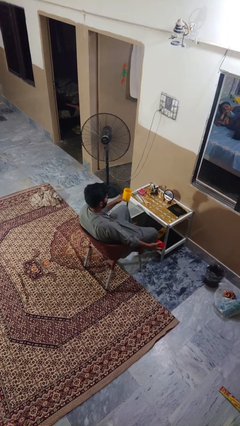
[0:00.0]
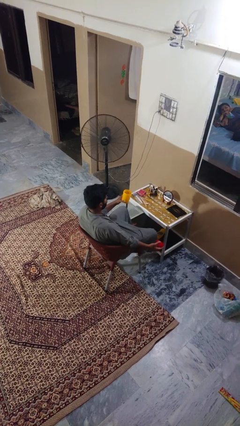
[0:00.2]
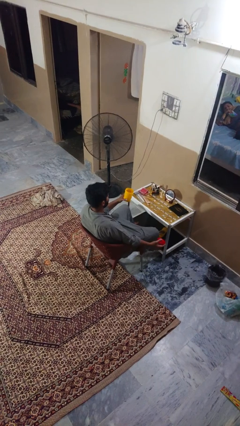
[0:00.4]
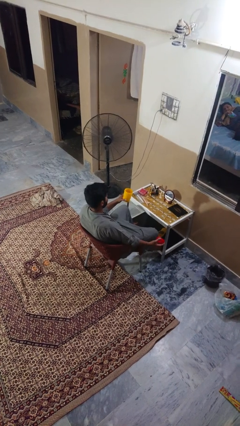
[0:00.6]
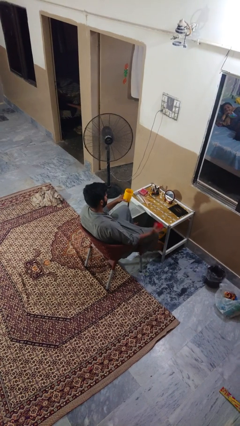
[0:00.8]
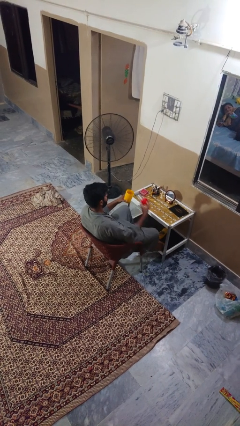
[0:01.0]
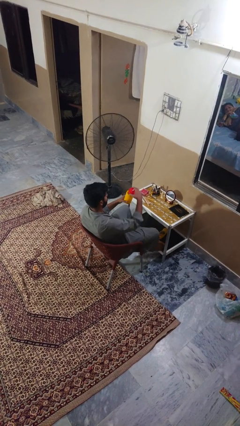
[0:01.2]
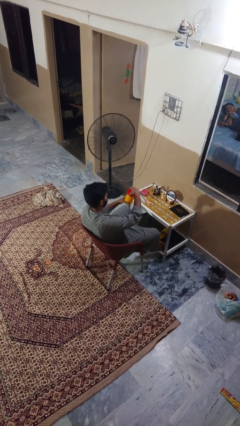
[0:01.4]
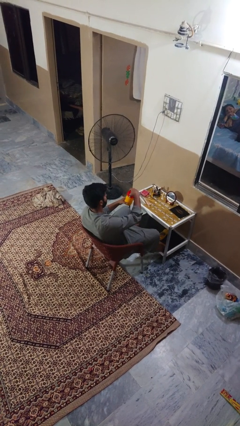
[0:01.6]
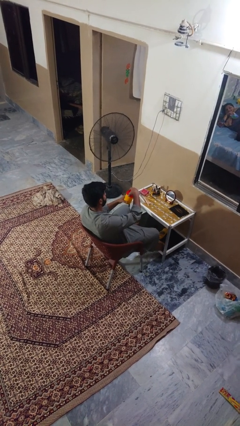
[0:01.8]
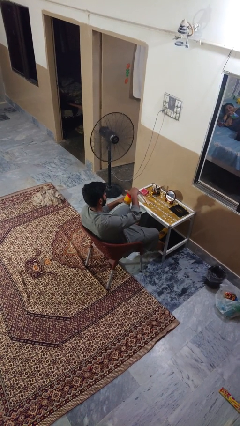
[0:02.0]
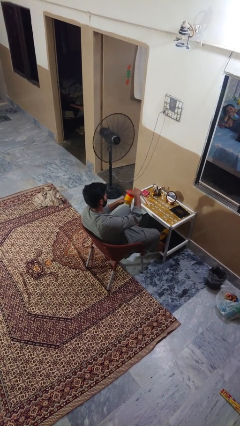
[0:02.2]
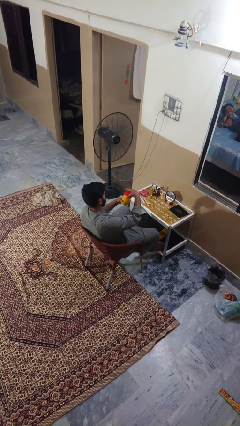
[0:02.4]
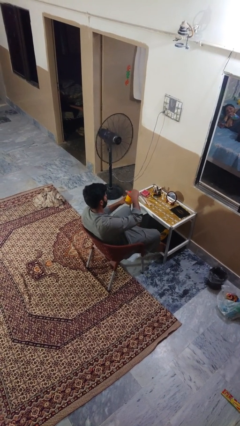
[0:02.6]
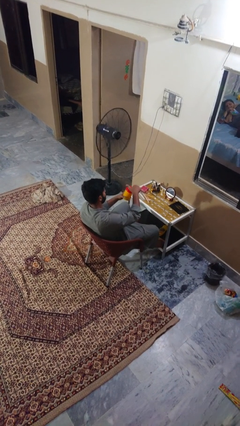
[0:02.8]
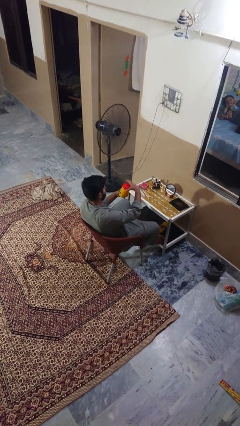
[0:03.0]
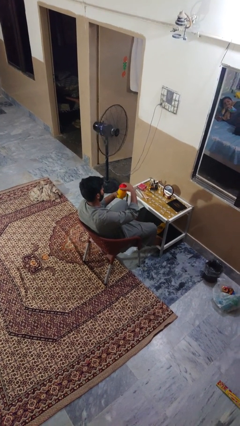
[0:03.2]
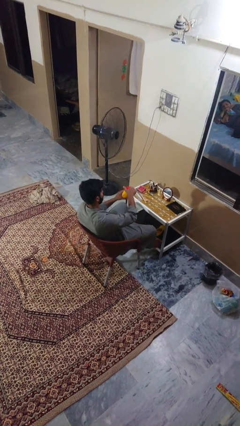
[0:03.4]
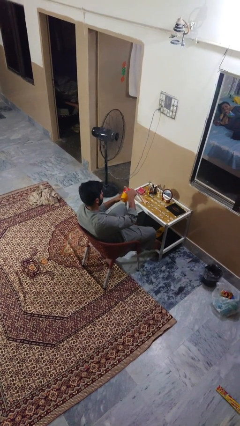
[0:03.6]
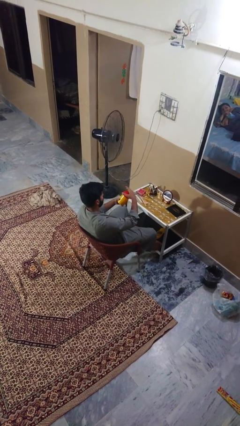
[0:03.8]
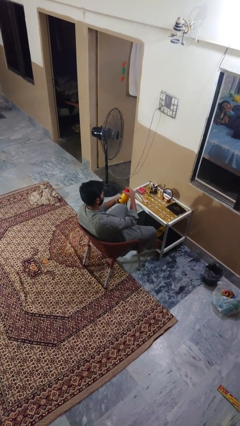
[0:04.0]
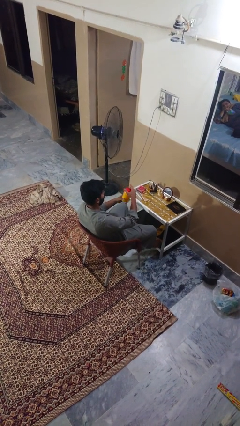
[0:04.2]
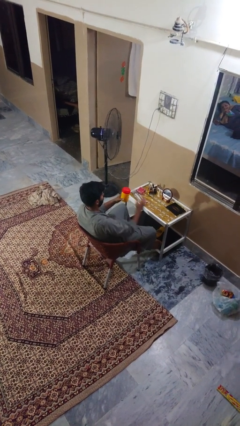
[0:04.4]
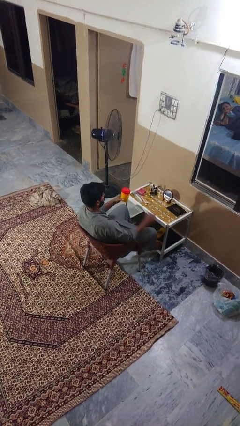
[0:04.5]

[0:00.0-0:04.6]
person closes jar

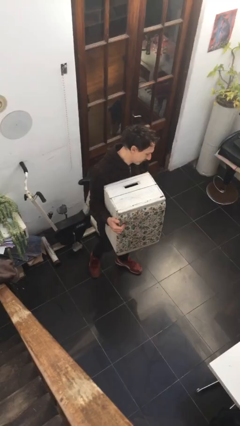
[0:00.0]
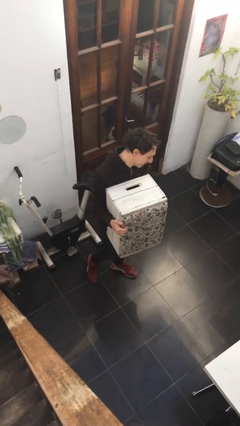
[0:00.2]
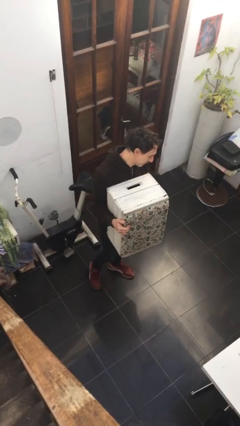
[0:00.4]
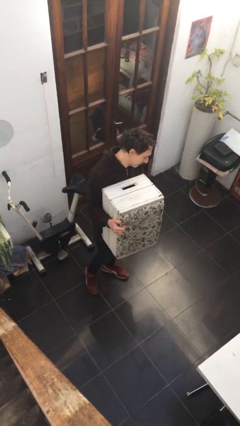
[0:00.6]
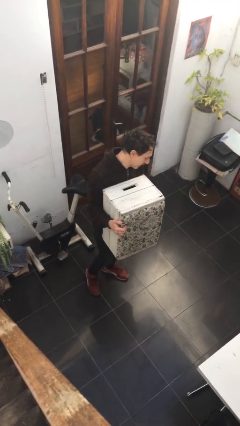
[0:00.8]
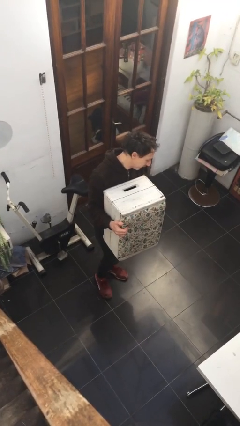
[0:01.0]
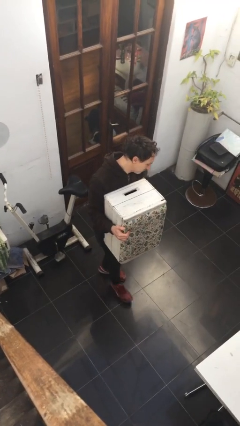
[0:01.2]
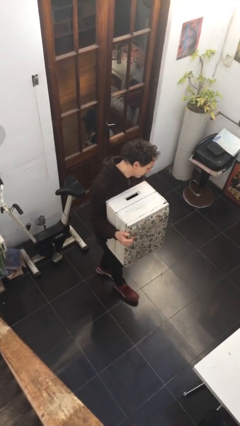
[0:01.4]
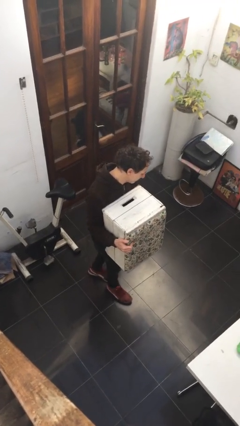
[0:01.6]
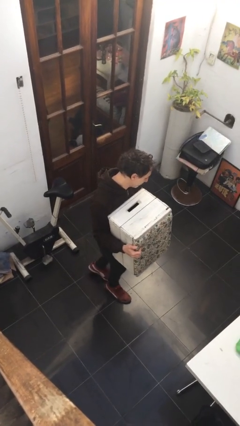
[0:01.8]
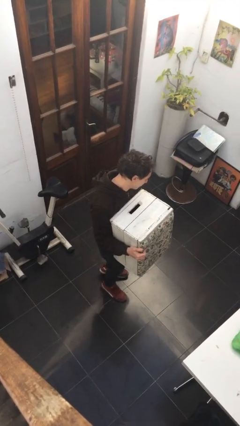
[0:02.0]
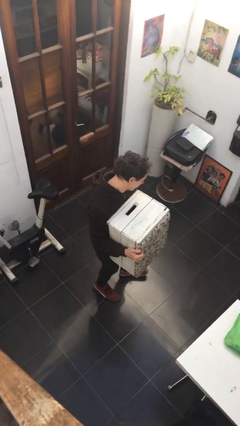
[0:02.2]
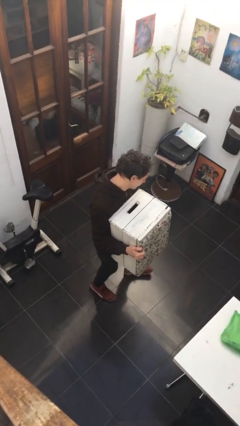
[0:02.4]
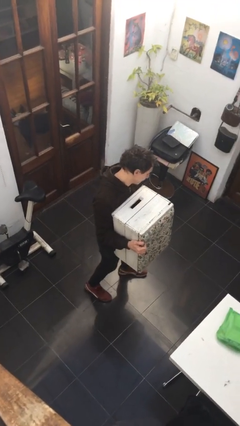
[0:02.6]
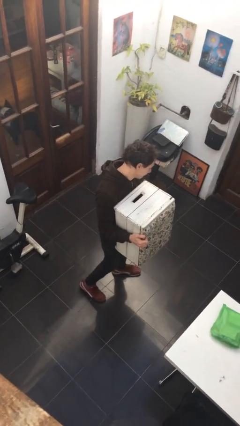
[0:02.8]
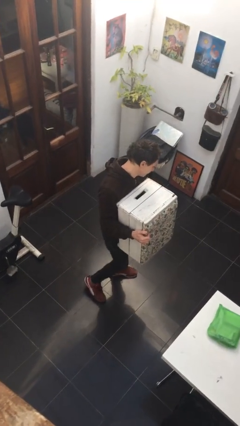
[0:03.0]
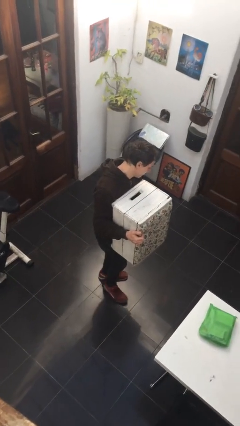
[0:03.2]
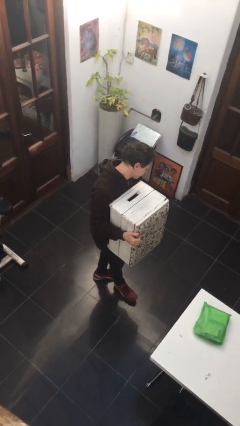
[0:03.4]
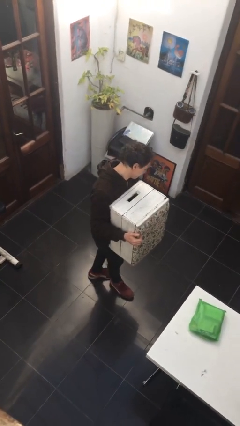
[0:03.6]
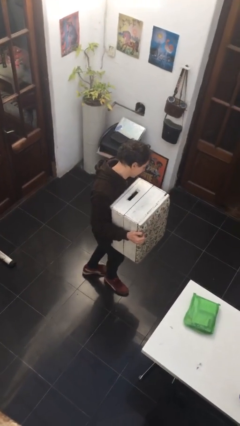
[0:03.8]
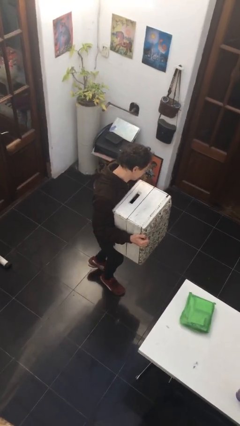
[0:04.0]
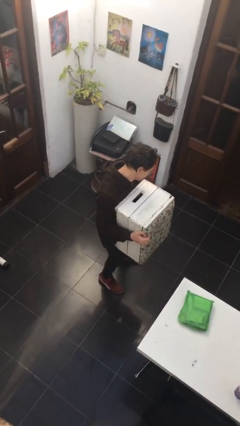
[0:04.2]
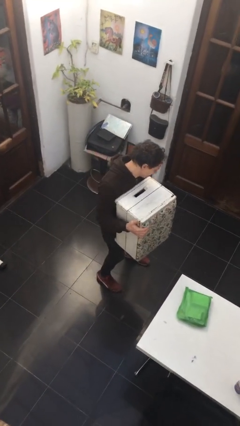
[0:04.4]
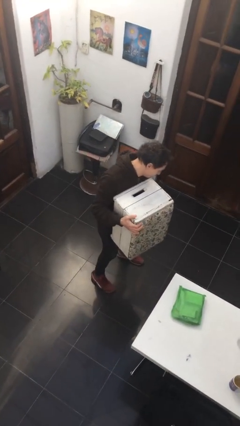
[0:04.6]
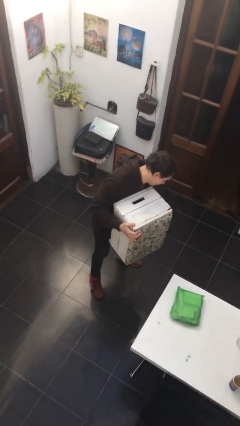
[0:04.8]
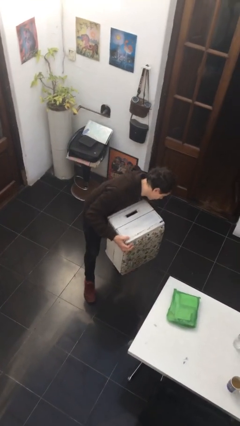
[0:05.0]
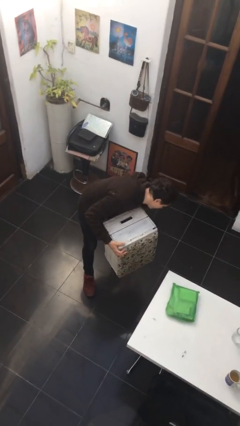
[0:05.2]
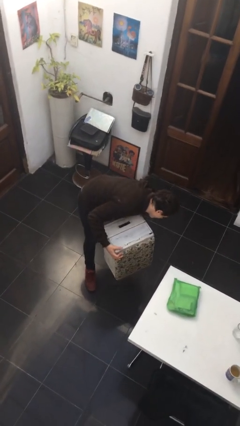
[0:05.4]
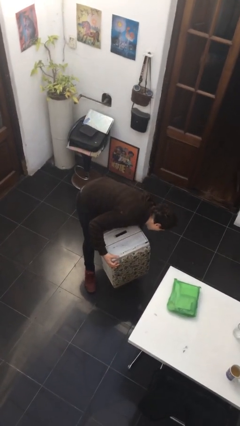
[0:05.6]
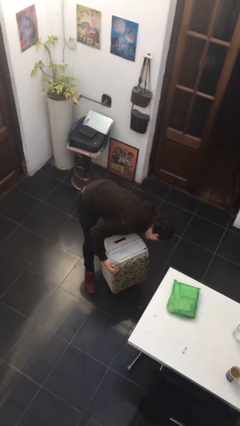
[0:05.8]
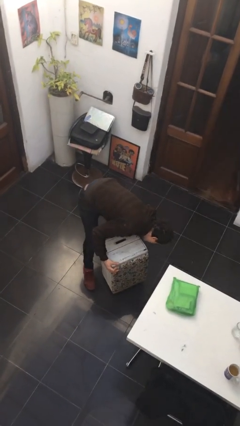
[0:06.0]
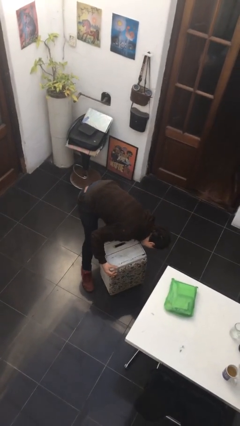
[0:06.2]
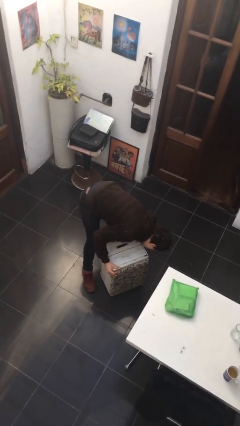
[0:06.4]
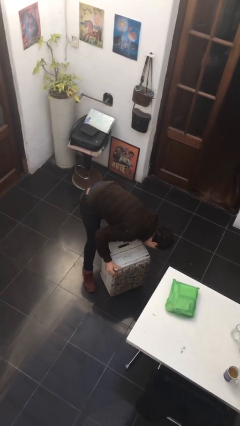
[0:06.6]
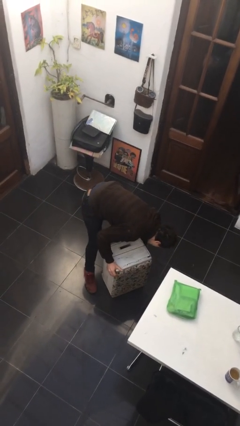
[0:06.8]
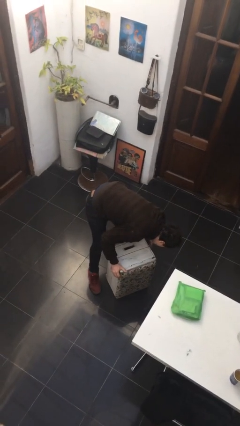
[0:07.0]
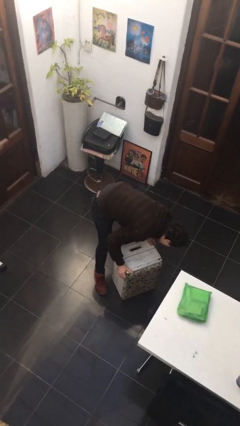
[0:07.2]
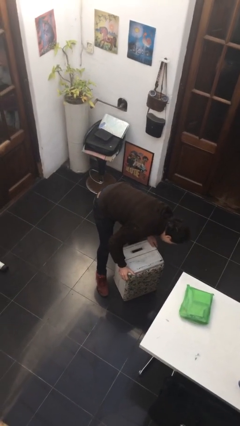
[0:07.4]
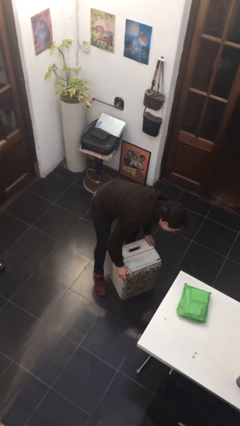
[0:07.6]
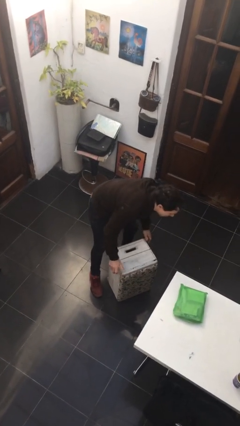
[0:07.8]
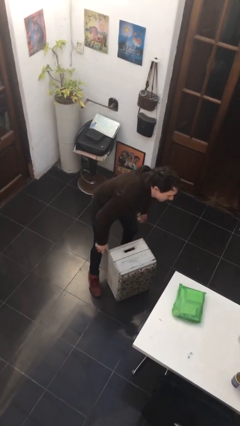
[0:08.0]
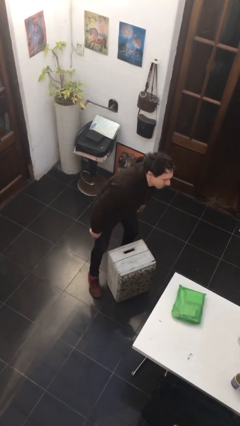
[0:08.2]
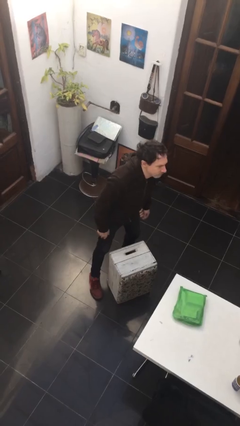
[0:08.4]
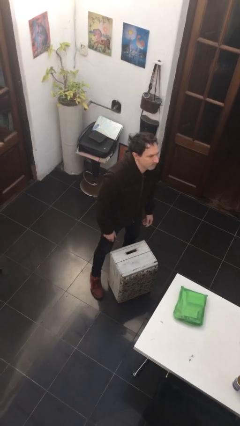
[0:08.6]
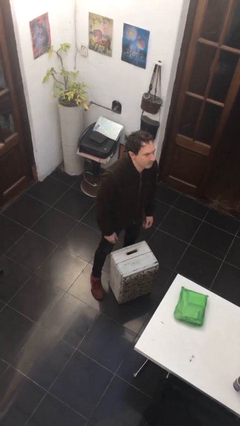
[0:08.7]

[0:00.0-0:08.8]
person carries heavy object

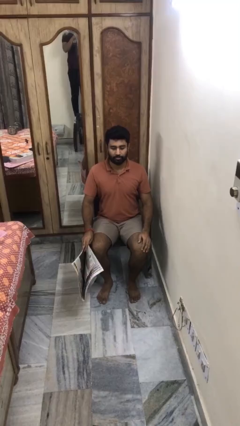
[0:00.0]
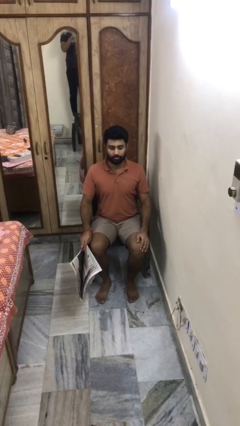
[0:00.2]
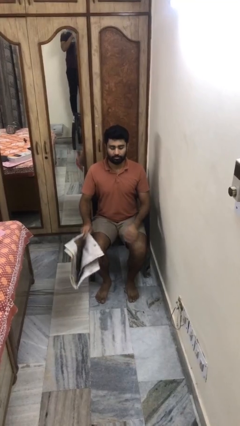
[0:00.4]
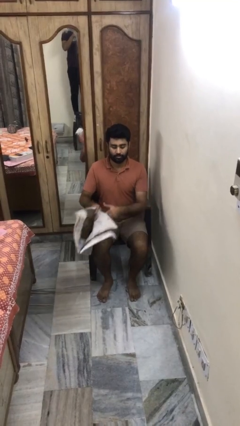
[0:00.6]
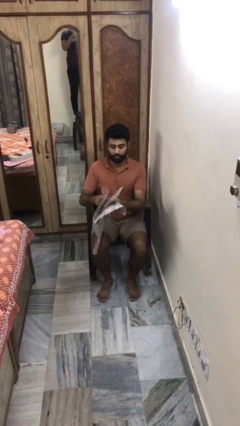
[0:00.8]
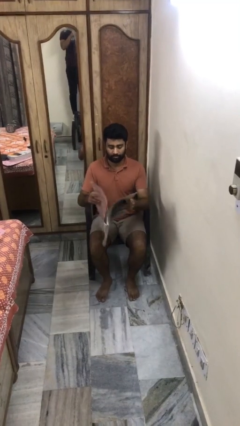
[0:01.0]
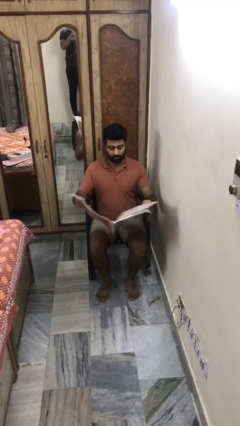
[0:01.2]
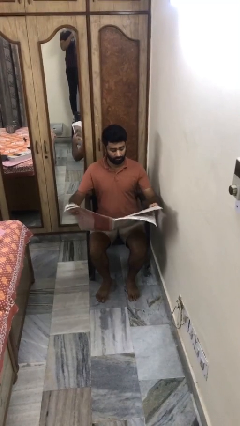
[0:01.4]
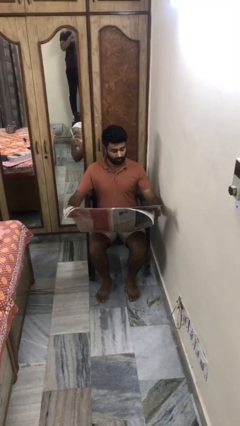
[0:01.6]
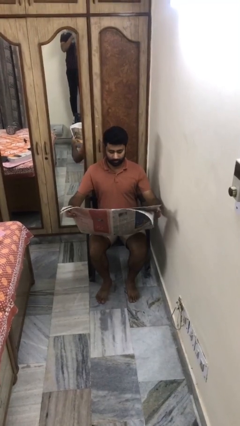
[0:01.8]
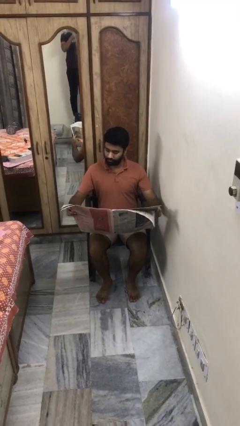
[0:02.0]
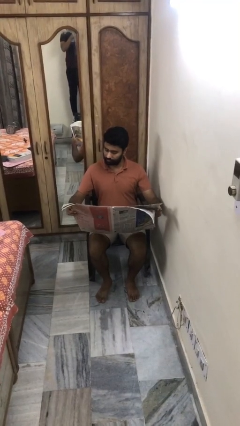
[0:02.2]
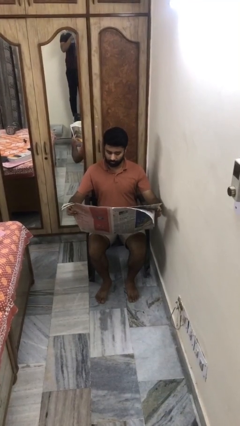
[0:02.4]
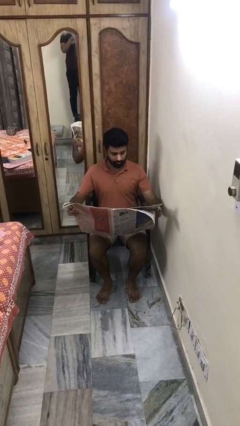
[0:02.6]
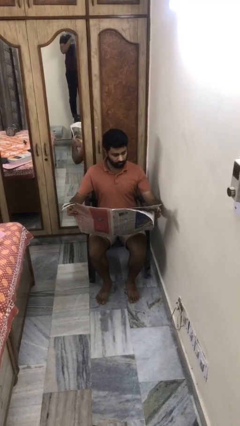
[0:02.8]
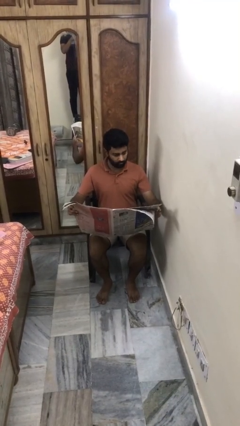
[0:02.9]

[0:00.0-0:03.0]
person reads newspaper

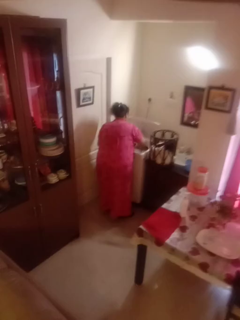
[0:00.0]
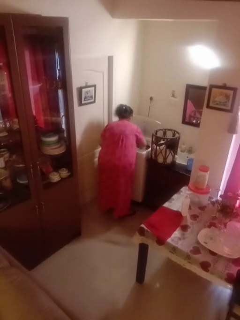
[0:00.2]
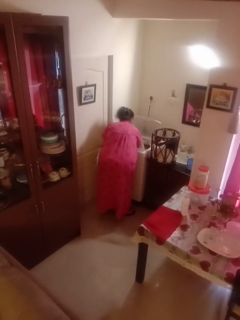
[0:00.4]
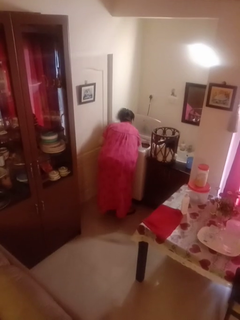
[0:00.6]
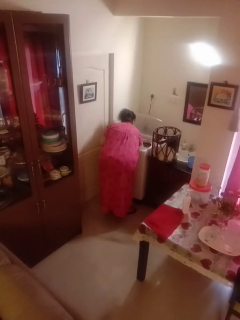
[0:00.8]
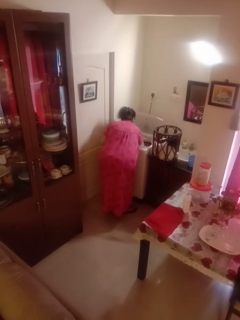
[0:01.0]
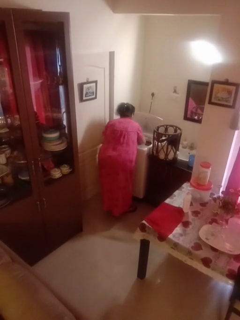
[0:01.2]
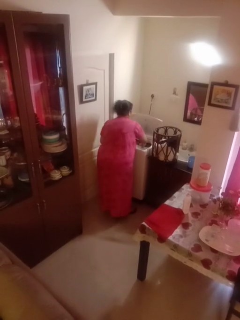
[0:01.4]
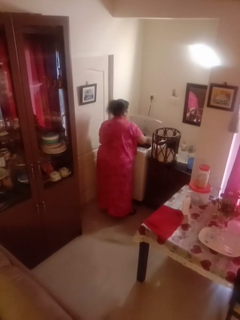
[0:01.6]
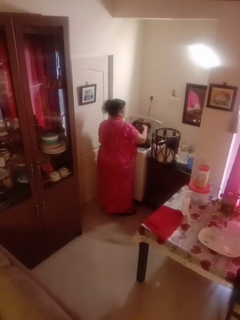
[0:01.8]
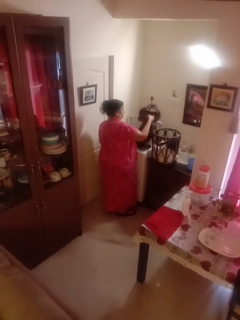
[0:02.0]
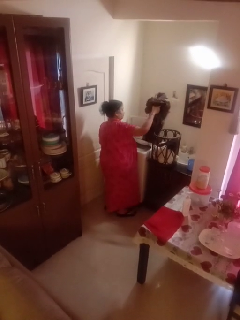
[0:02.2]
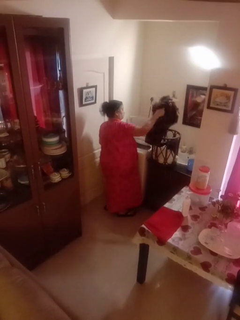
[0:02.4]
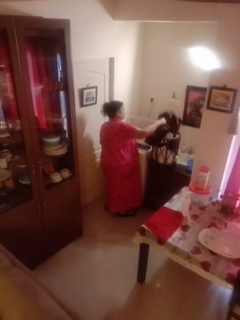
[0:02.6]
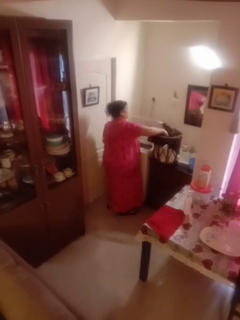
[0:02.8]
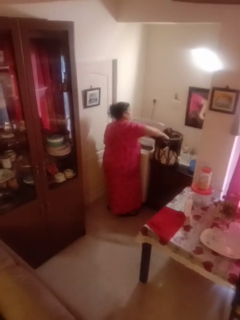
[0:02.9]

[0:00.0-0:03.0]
person unloads clotheswasher
